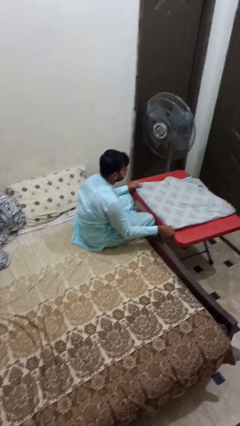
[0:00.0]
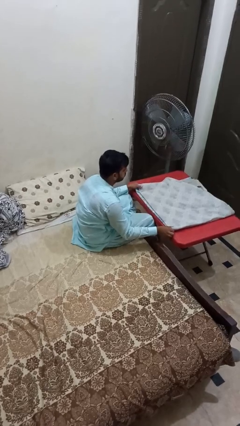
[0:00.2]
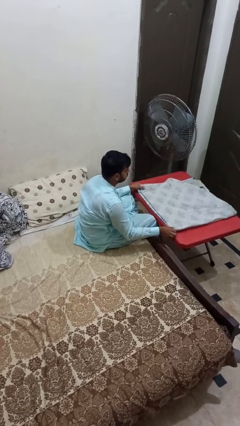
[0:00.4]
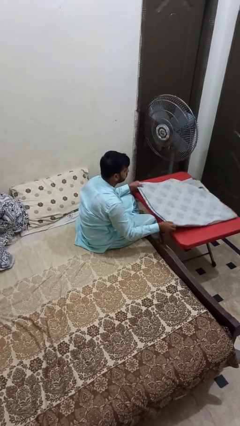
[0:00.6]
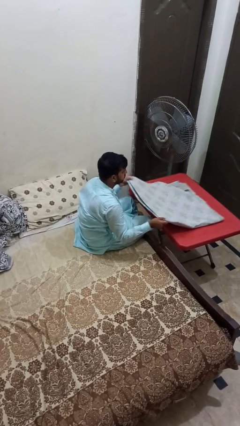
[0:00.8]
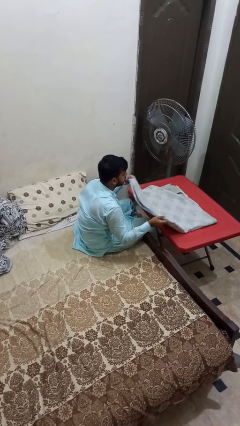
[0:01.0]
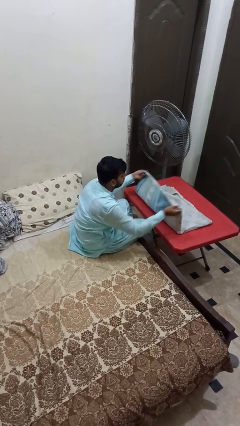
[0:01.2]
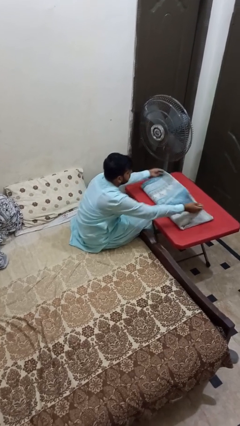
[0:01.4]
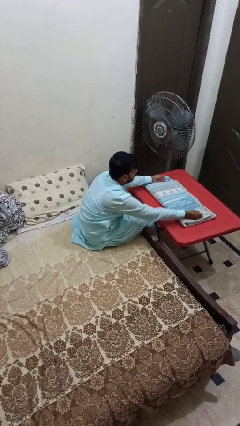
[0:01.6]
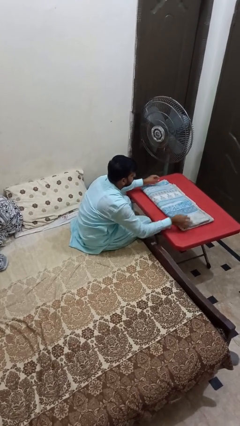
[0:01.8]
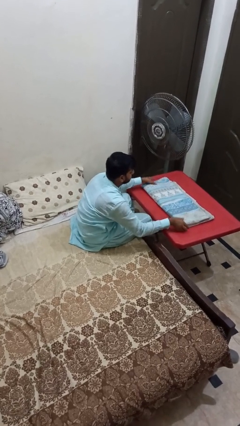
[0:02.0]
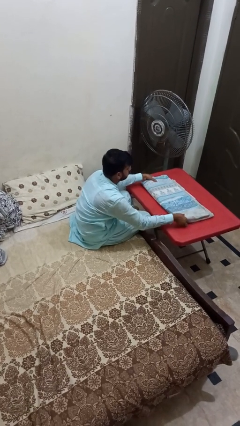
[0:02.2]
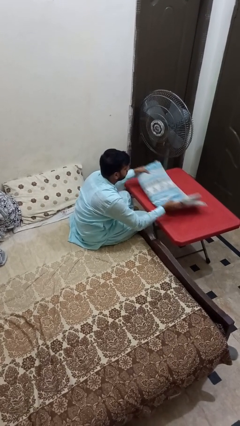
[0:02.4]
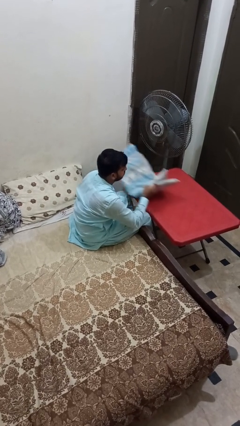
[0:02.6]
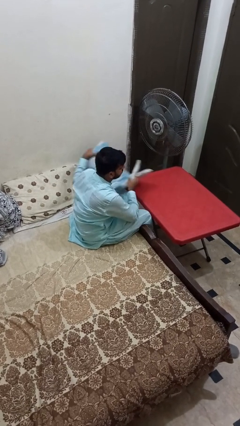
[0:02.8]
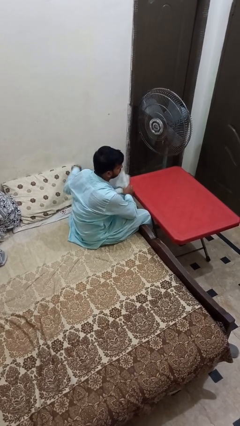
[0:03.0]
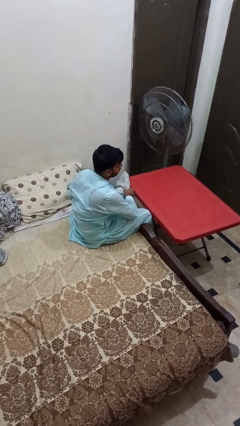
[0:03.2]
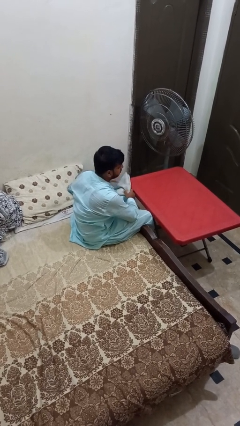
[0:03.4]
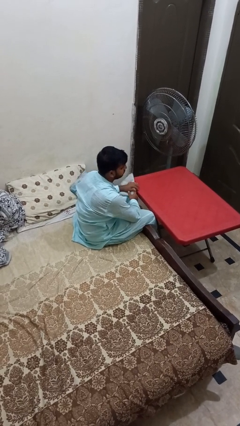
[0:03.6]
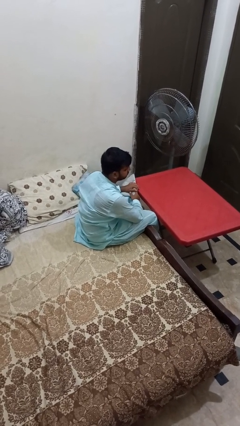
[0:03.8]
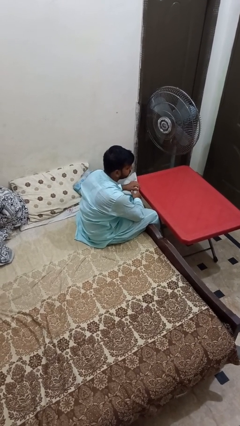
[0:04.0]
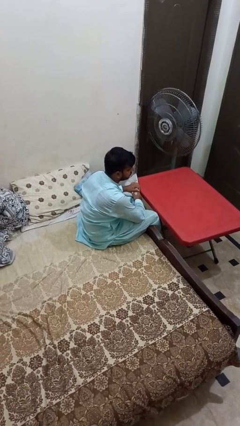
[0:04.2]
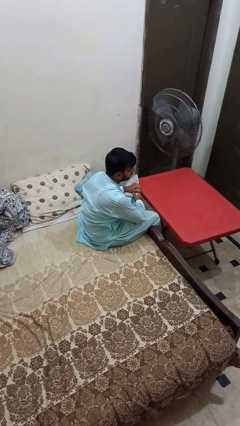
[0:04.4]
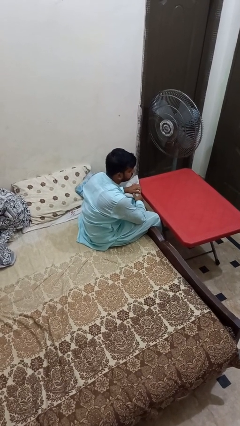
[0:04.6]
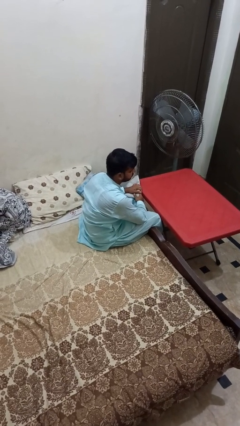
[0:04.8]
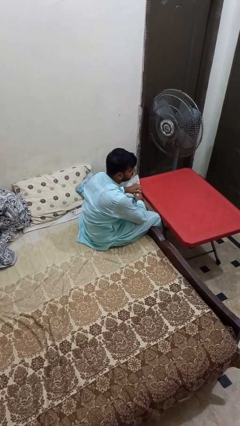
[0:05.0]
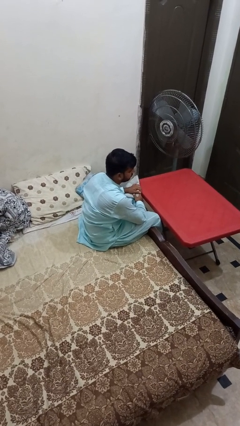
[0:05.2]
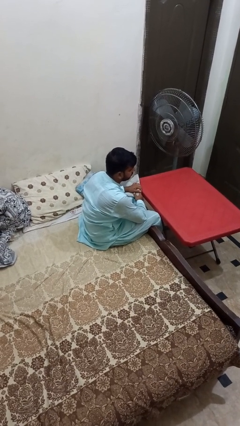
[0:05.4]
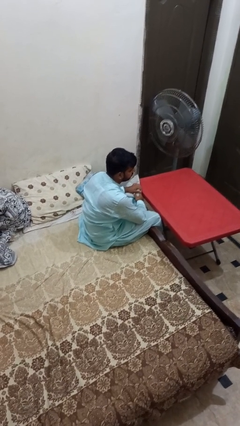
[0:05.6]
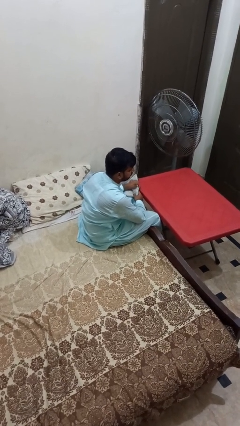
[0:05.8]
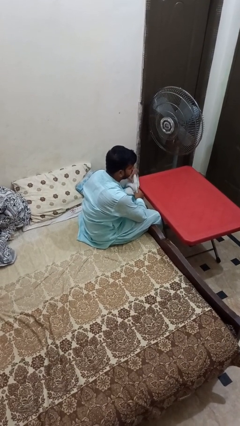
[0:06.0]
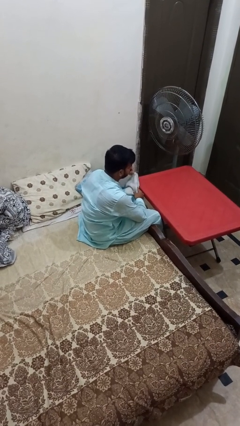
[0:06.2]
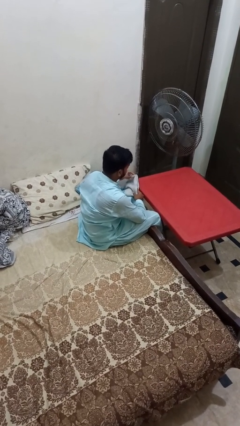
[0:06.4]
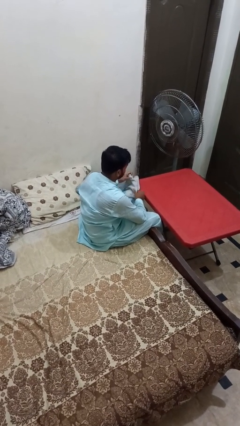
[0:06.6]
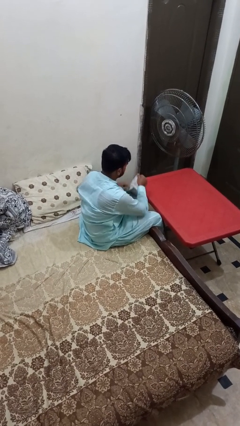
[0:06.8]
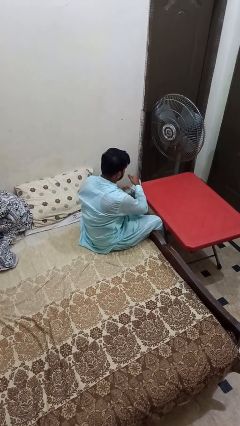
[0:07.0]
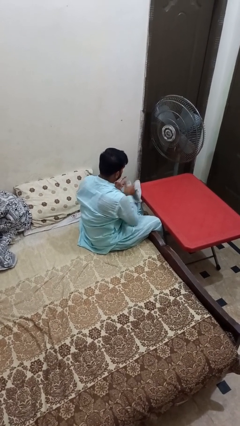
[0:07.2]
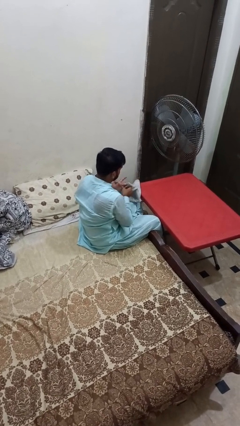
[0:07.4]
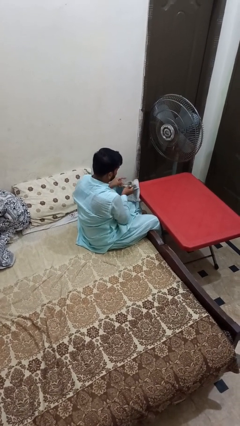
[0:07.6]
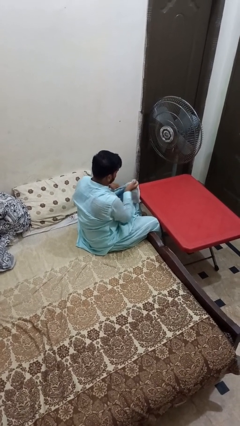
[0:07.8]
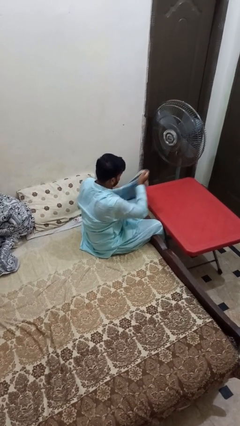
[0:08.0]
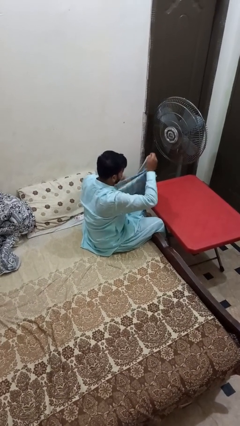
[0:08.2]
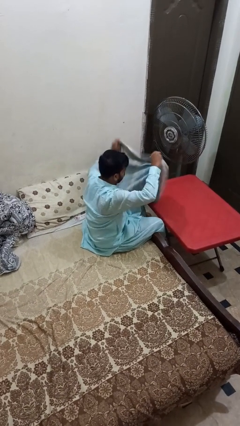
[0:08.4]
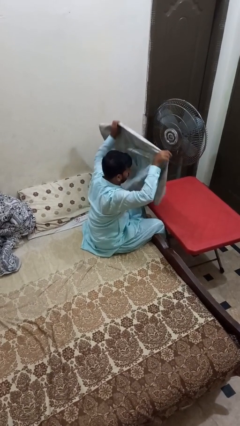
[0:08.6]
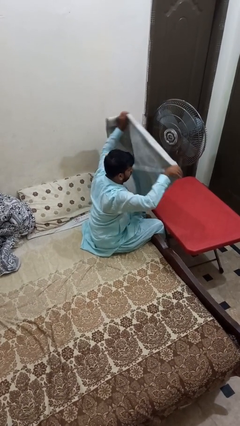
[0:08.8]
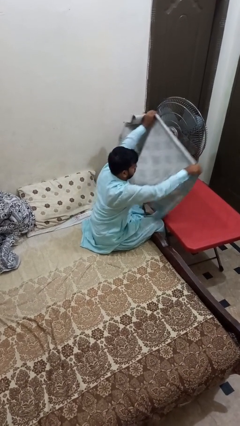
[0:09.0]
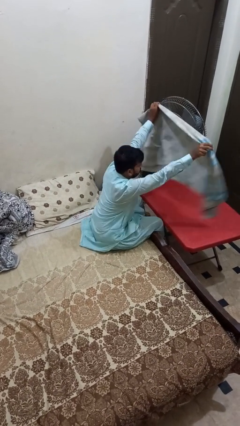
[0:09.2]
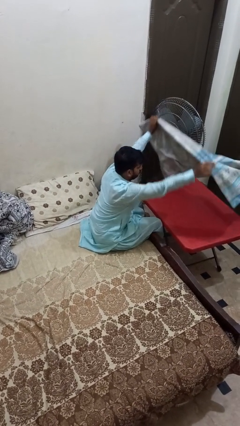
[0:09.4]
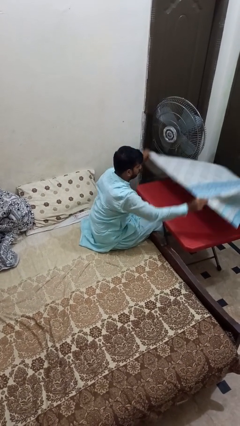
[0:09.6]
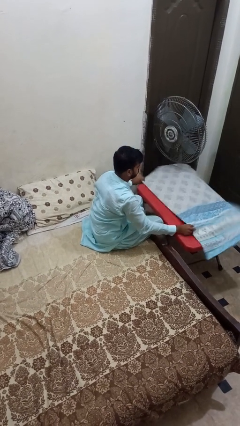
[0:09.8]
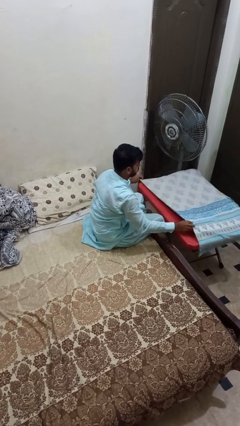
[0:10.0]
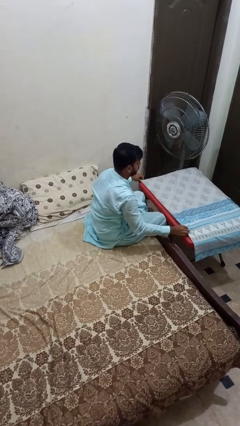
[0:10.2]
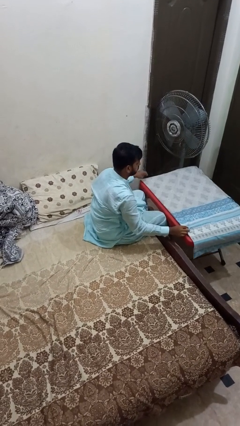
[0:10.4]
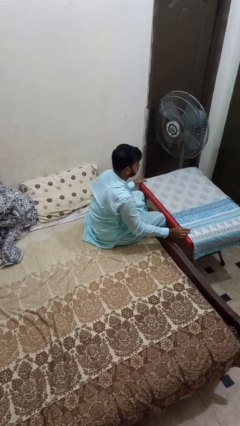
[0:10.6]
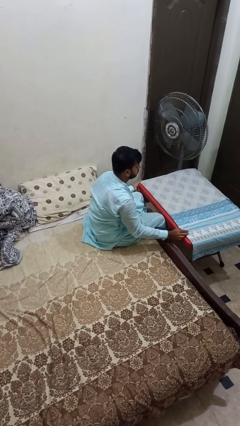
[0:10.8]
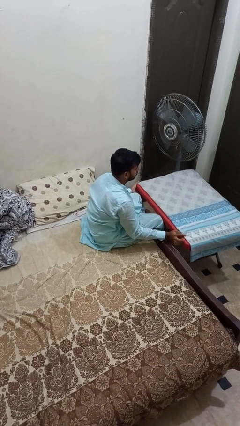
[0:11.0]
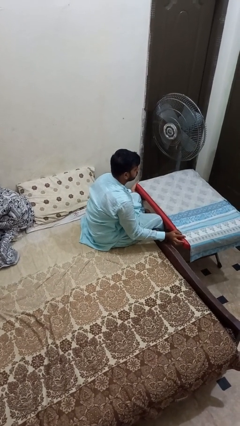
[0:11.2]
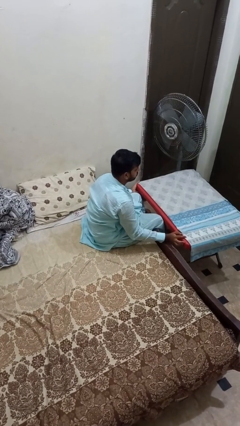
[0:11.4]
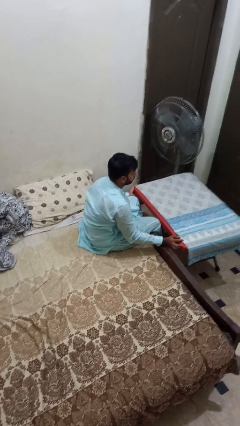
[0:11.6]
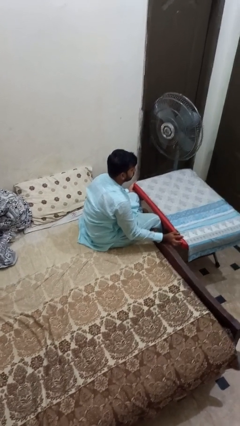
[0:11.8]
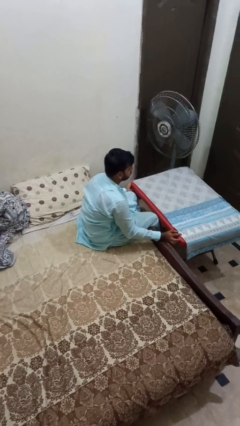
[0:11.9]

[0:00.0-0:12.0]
person interacts with tablet

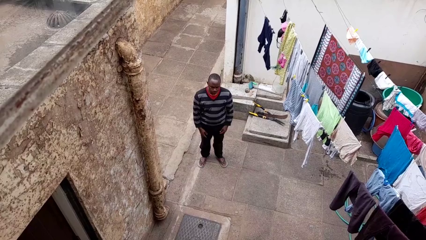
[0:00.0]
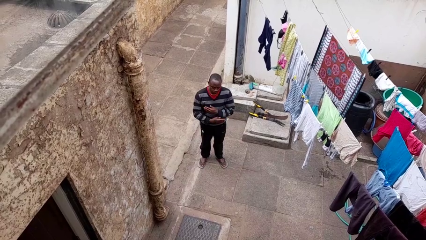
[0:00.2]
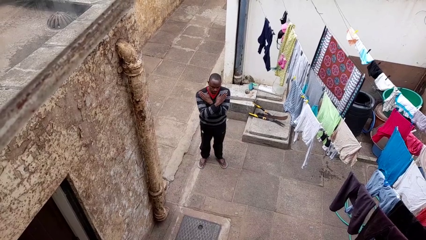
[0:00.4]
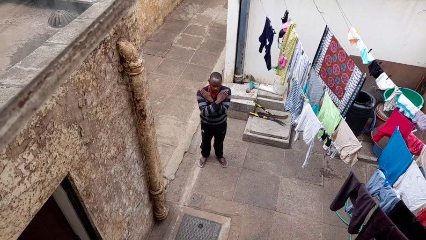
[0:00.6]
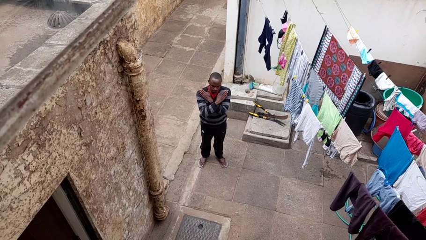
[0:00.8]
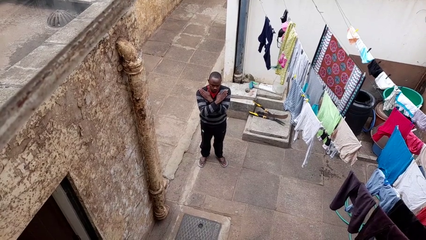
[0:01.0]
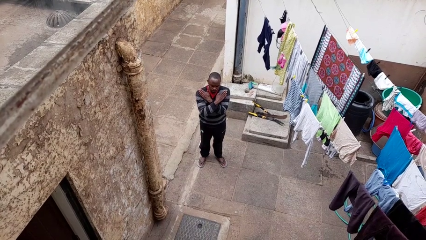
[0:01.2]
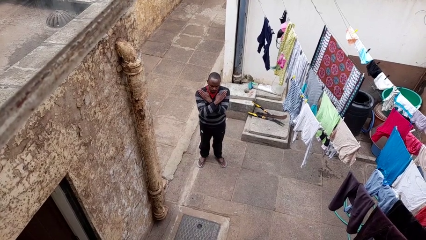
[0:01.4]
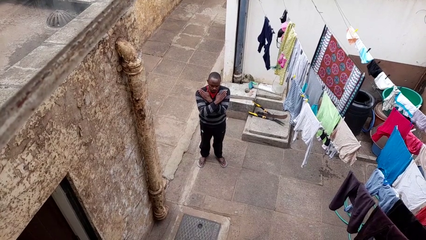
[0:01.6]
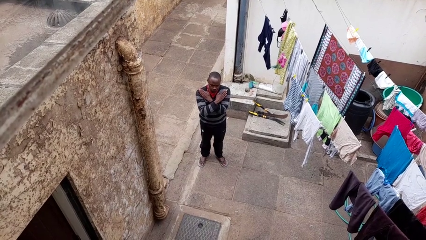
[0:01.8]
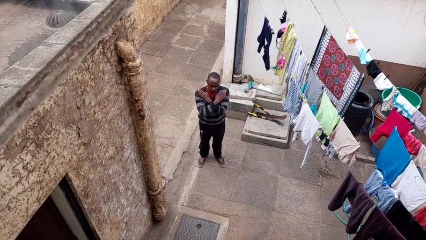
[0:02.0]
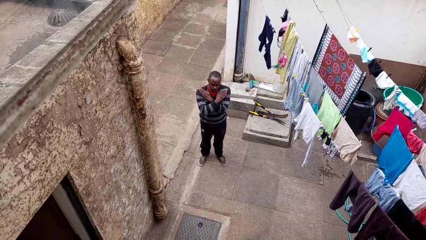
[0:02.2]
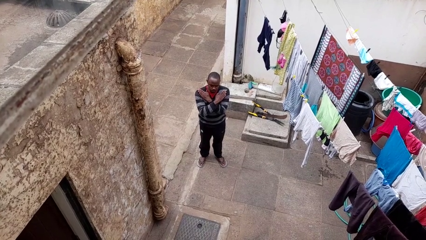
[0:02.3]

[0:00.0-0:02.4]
person gestures arms x

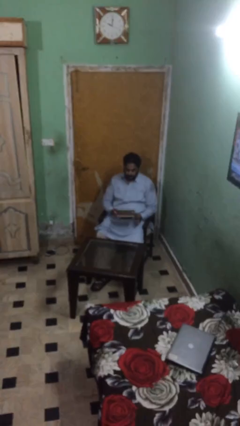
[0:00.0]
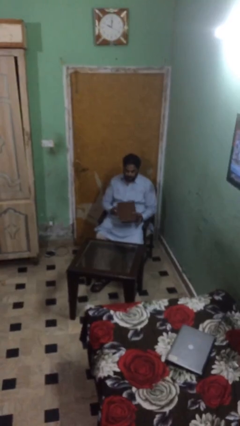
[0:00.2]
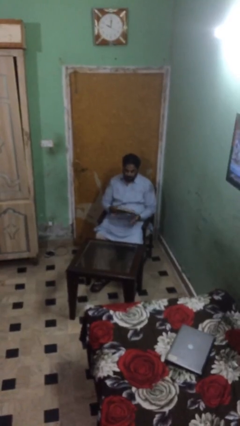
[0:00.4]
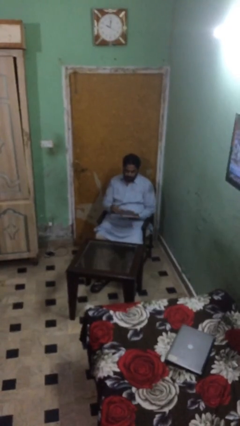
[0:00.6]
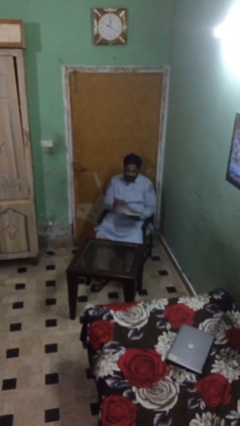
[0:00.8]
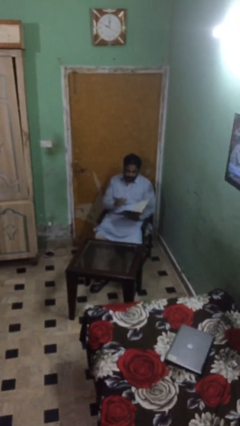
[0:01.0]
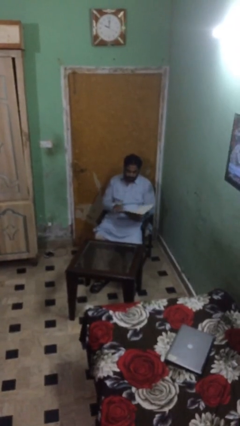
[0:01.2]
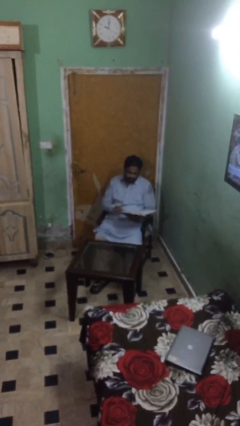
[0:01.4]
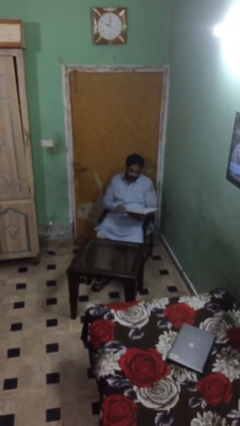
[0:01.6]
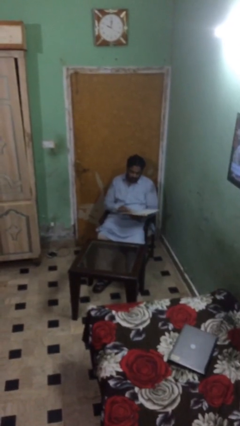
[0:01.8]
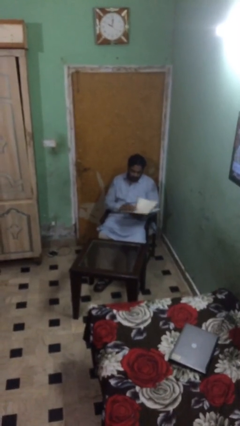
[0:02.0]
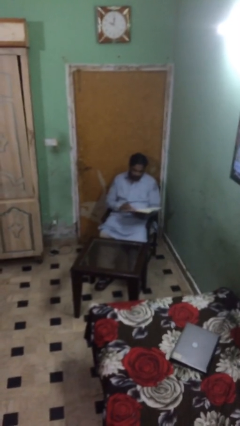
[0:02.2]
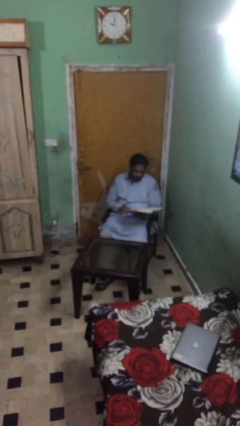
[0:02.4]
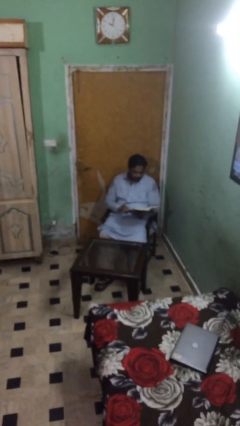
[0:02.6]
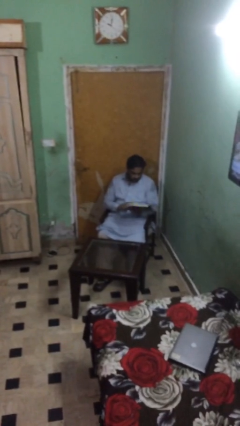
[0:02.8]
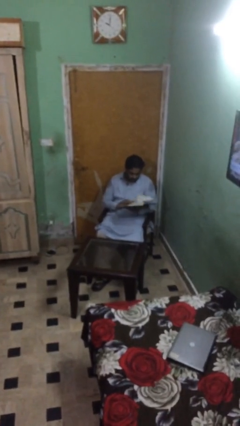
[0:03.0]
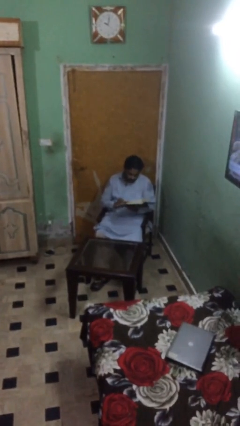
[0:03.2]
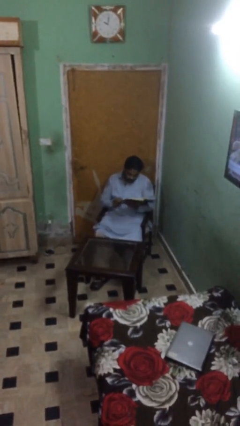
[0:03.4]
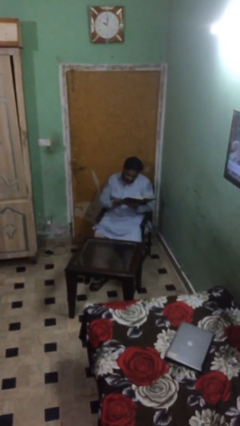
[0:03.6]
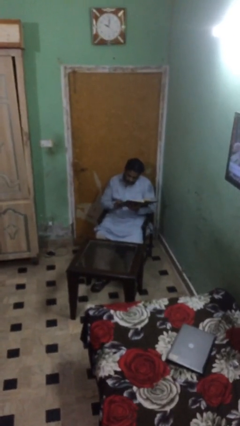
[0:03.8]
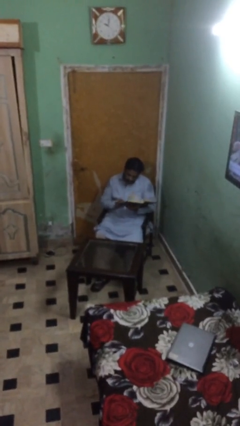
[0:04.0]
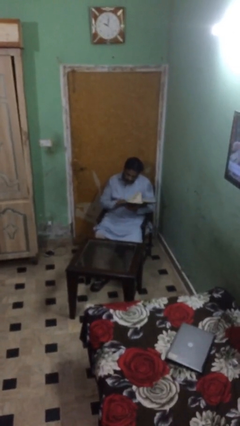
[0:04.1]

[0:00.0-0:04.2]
person reads document
